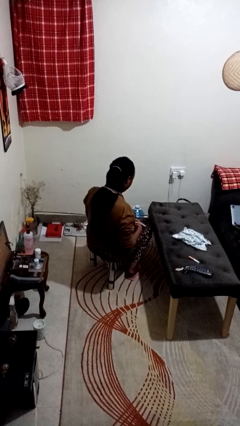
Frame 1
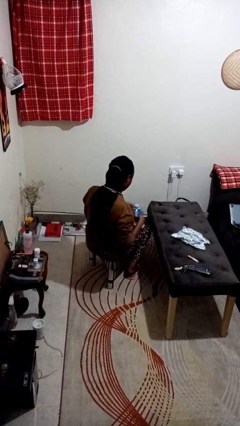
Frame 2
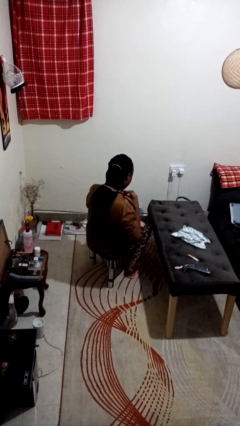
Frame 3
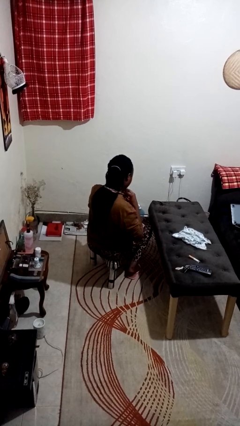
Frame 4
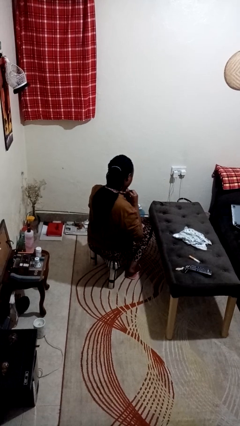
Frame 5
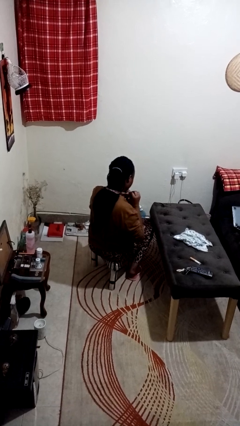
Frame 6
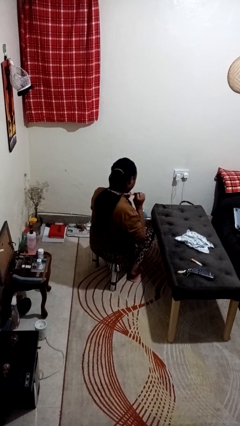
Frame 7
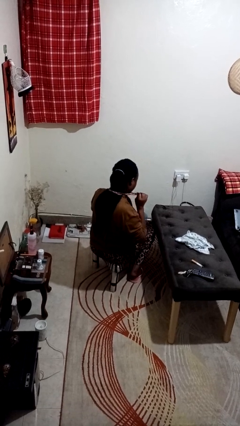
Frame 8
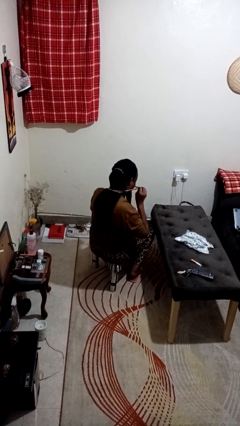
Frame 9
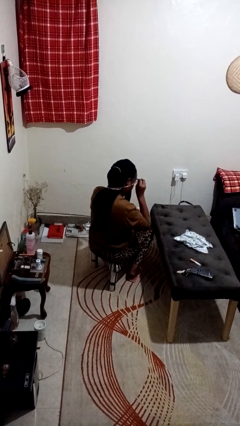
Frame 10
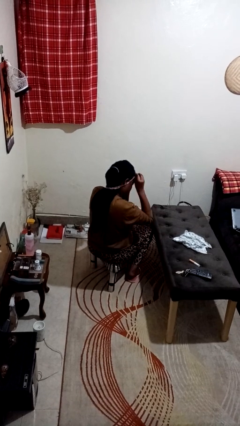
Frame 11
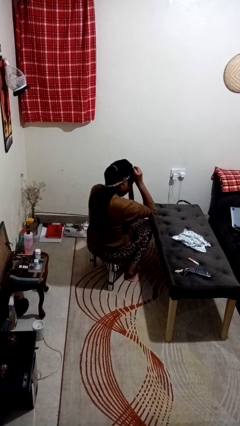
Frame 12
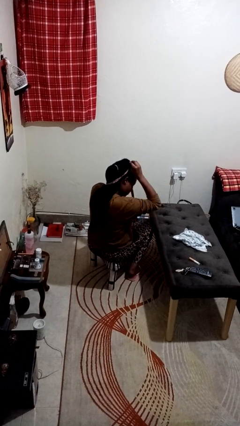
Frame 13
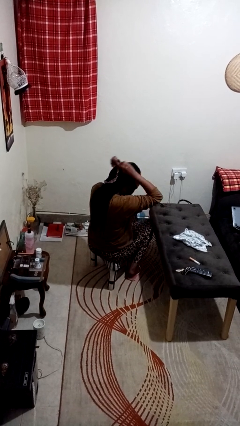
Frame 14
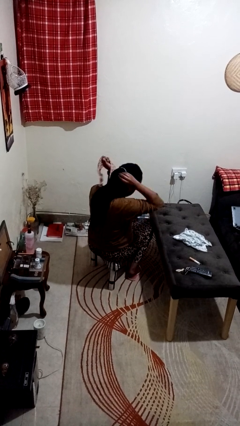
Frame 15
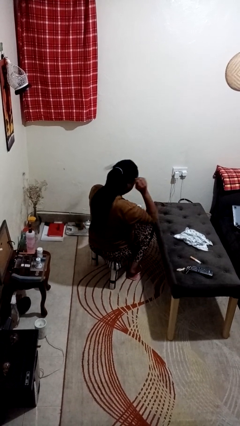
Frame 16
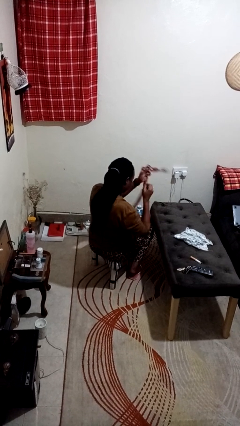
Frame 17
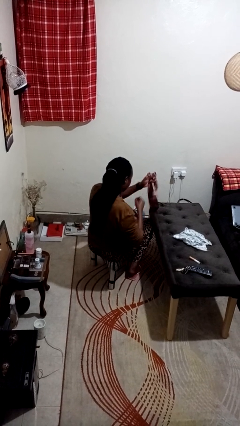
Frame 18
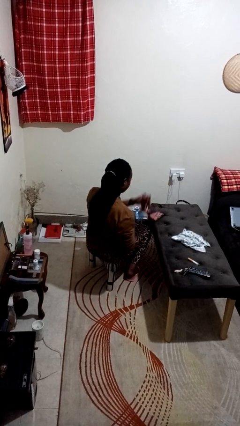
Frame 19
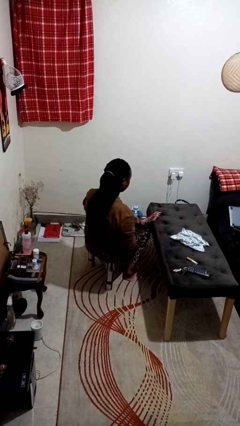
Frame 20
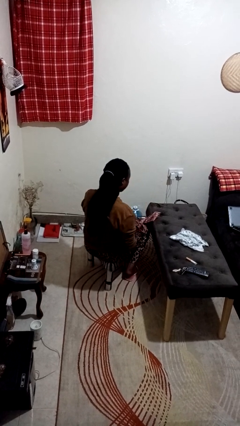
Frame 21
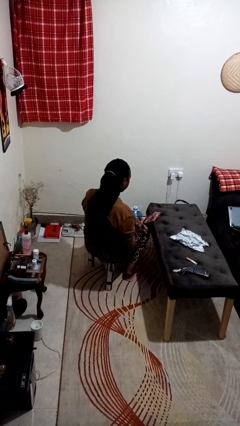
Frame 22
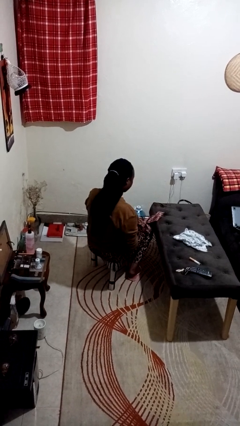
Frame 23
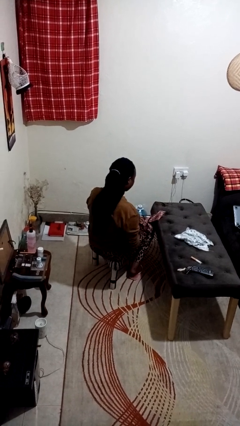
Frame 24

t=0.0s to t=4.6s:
person takes off necktie

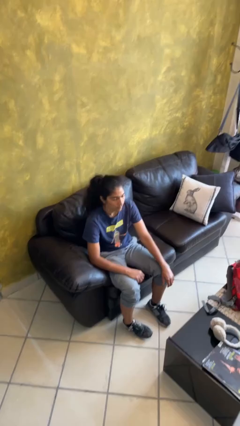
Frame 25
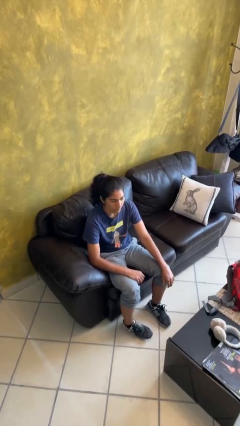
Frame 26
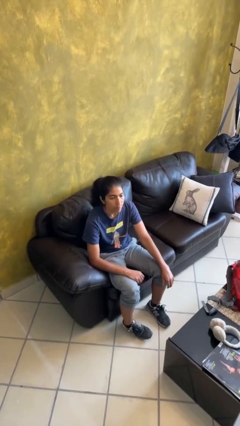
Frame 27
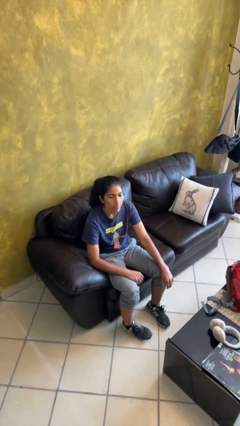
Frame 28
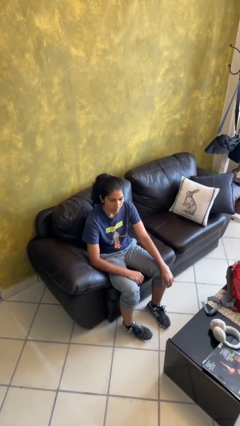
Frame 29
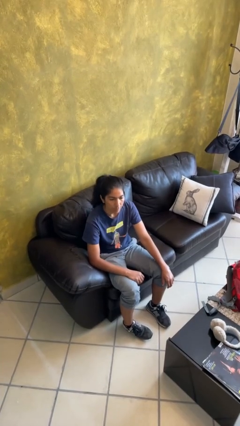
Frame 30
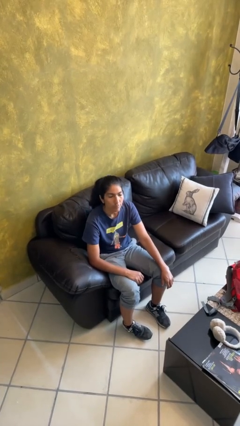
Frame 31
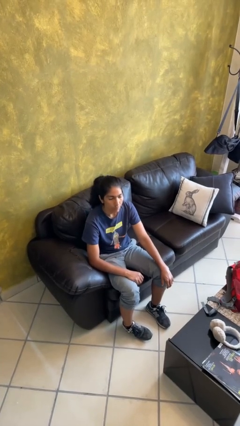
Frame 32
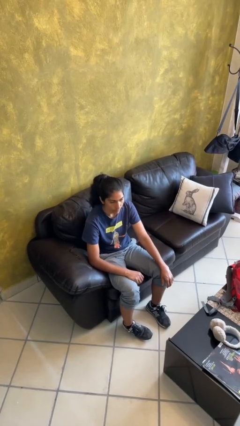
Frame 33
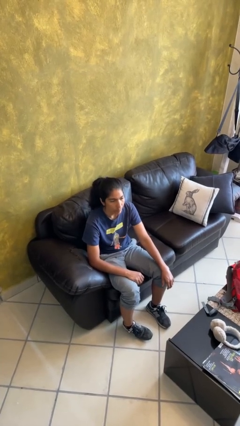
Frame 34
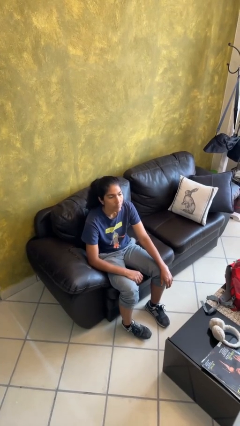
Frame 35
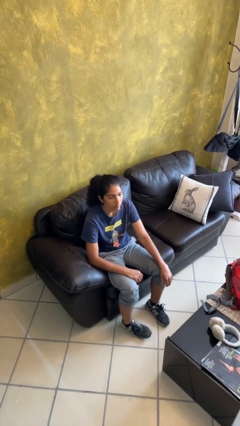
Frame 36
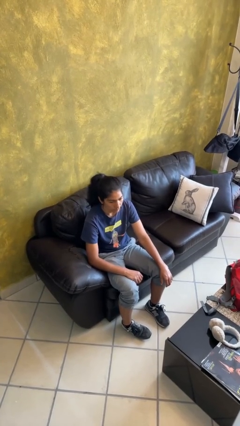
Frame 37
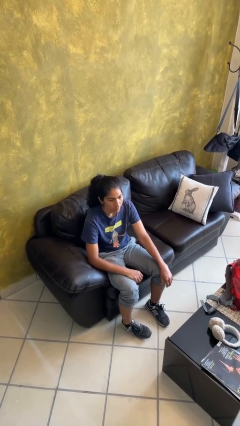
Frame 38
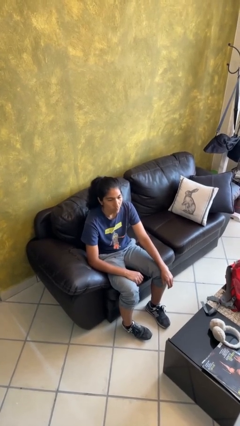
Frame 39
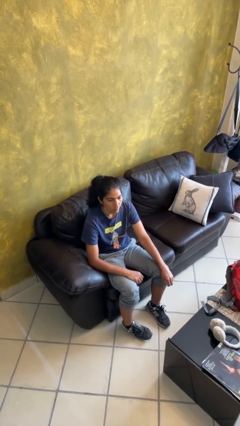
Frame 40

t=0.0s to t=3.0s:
person nods head

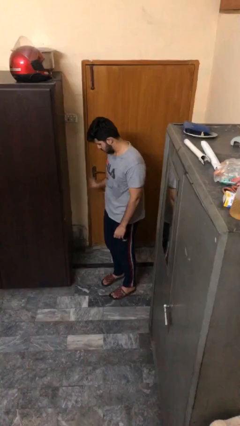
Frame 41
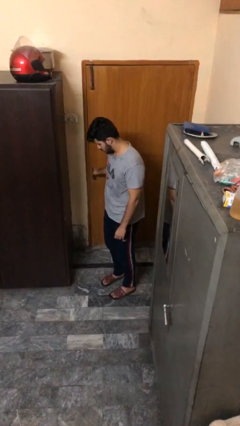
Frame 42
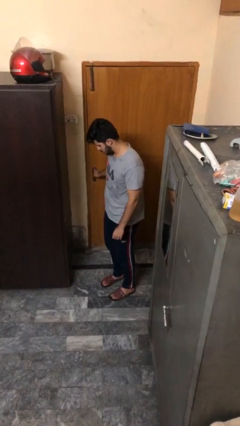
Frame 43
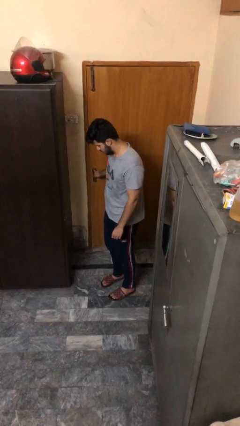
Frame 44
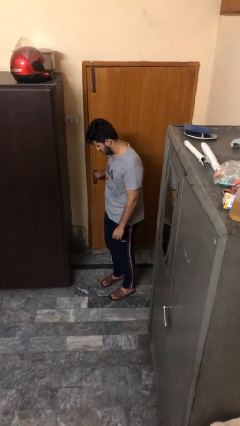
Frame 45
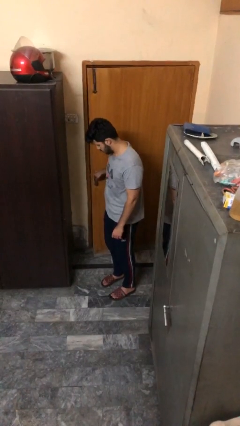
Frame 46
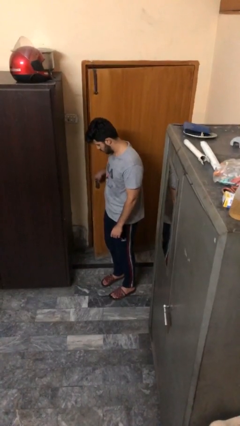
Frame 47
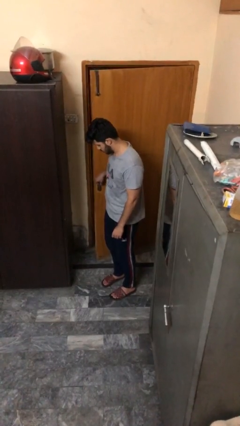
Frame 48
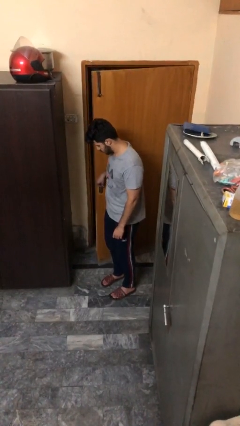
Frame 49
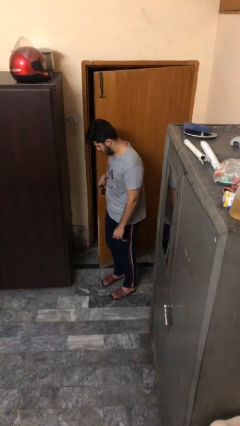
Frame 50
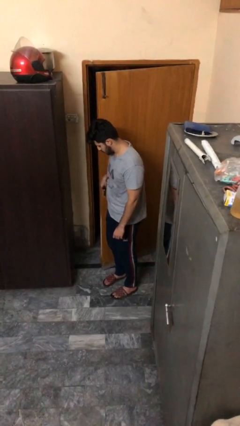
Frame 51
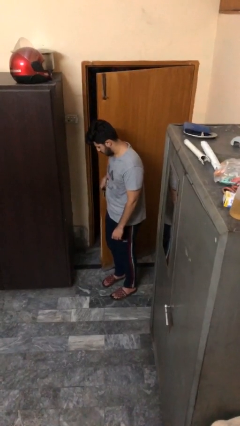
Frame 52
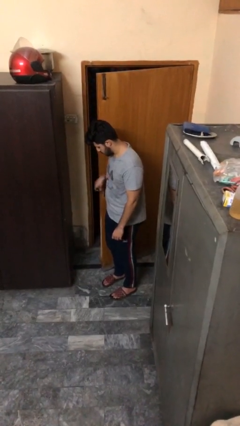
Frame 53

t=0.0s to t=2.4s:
person opens facility door

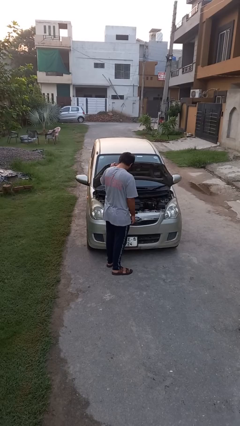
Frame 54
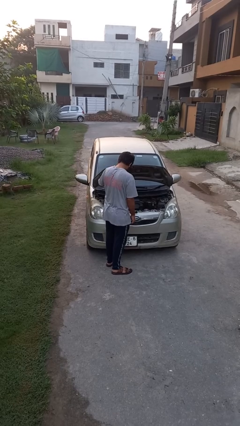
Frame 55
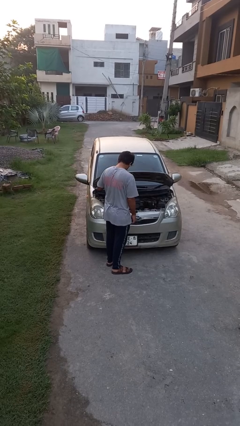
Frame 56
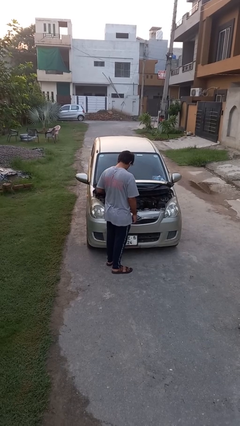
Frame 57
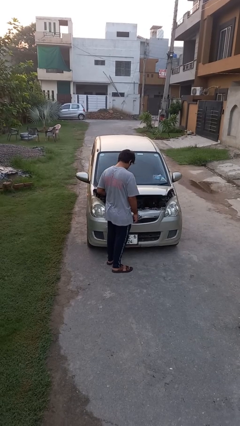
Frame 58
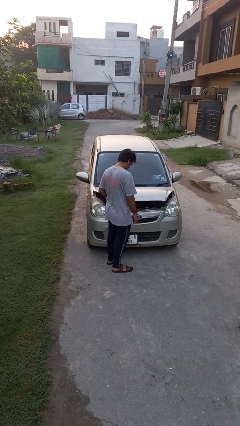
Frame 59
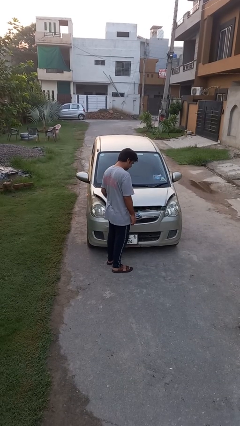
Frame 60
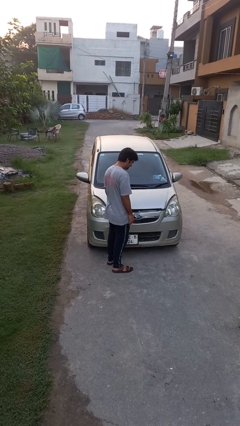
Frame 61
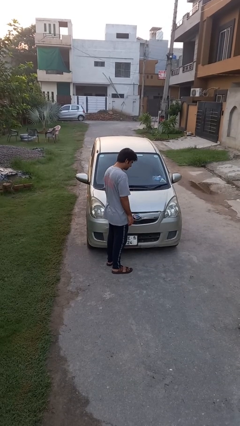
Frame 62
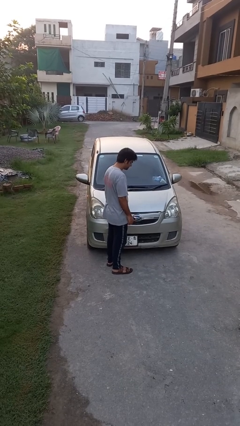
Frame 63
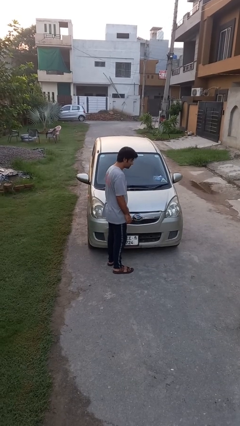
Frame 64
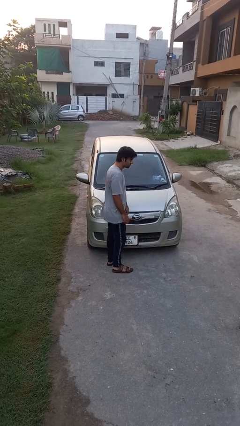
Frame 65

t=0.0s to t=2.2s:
person closes car hood

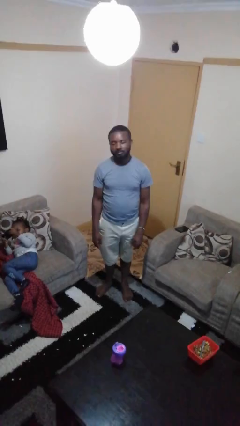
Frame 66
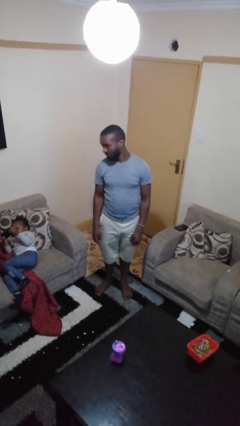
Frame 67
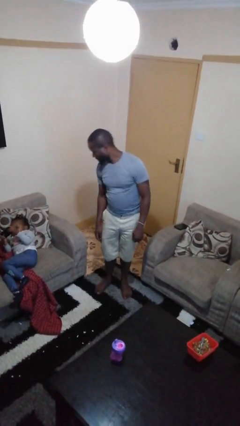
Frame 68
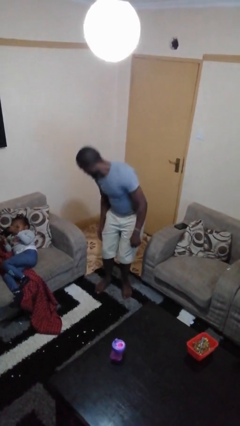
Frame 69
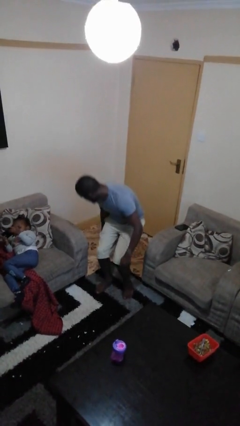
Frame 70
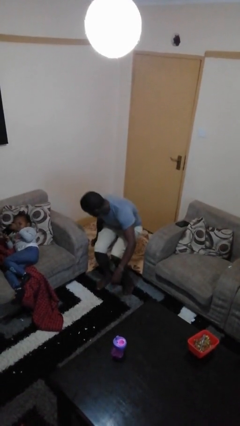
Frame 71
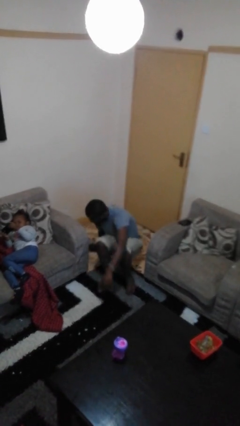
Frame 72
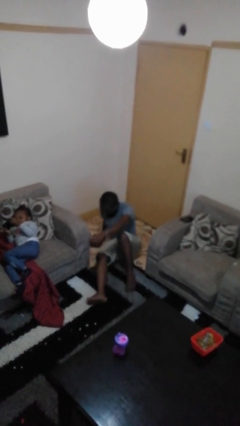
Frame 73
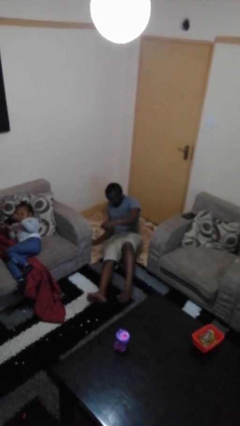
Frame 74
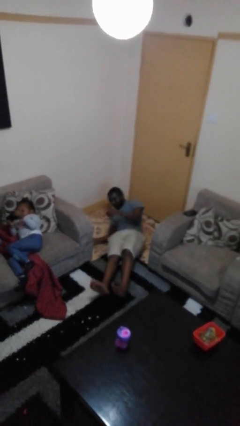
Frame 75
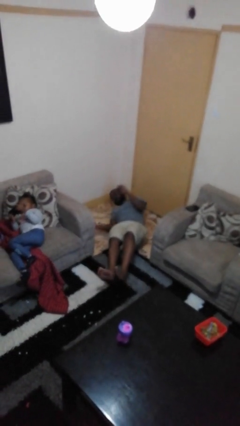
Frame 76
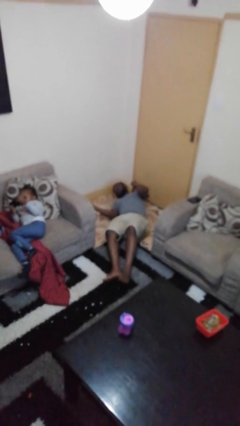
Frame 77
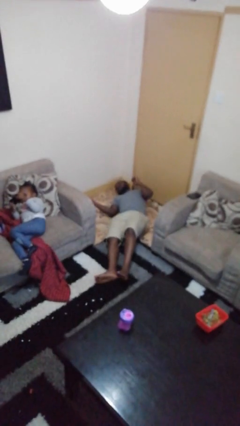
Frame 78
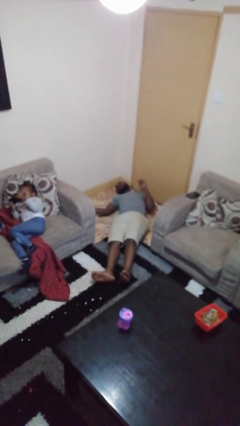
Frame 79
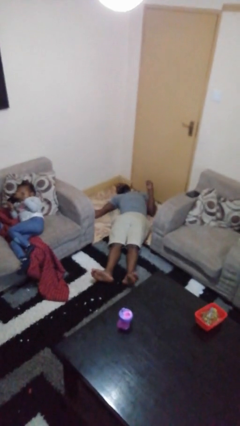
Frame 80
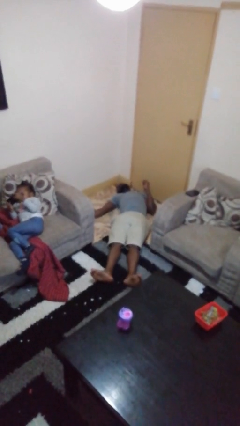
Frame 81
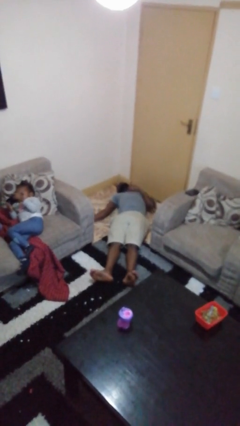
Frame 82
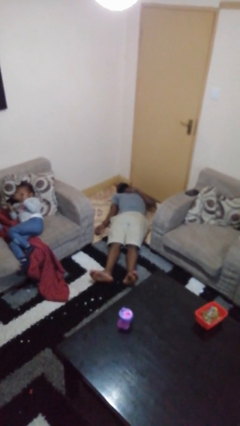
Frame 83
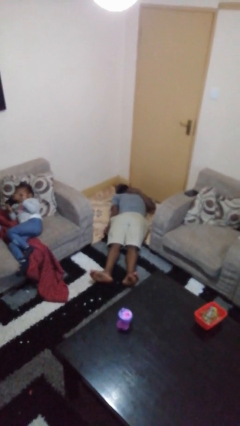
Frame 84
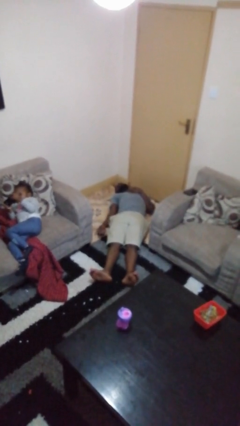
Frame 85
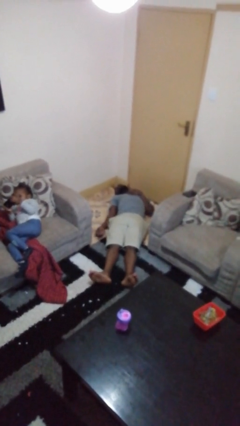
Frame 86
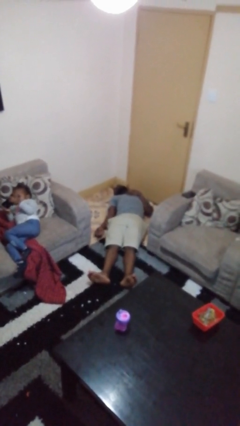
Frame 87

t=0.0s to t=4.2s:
person falls while standing

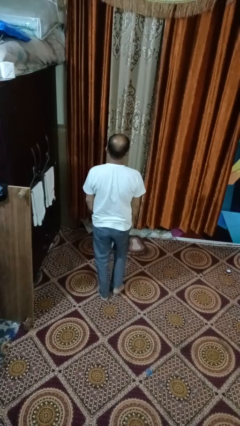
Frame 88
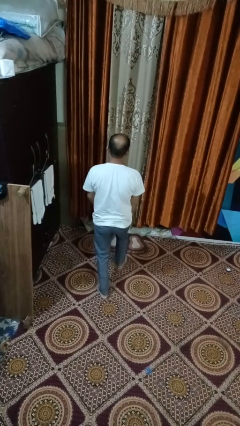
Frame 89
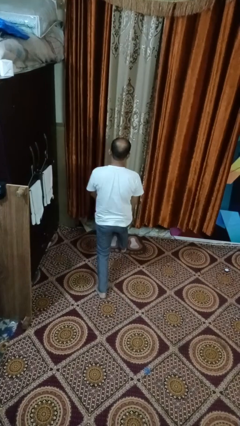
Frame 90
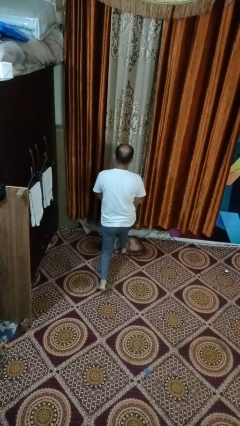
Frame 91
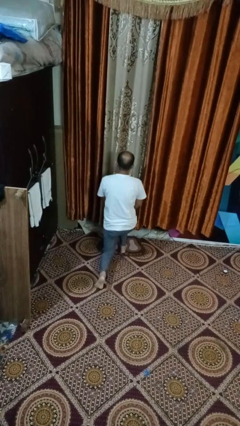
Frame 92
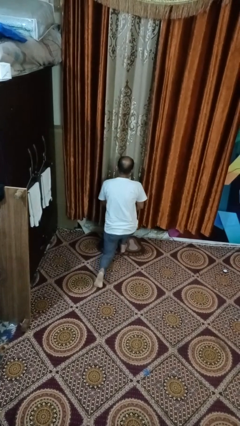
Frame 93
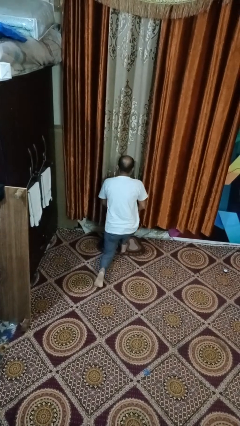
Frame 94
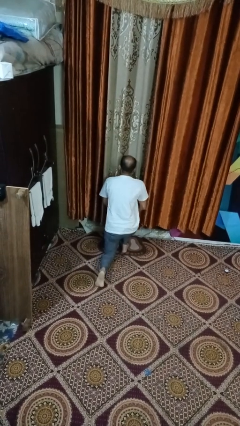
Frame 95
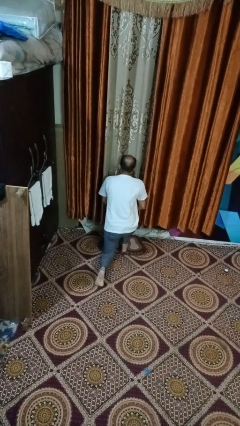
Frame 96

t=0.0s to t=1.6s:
person kneels
